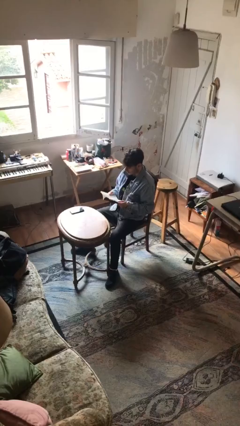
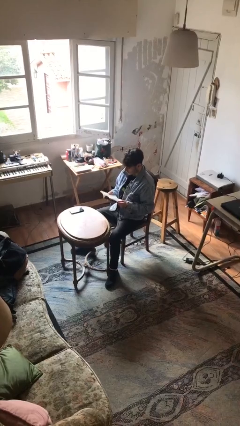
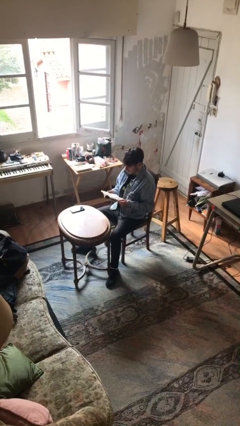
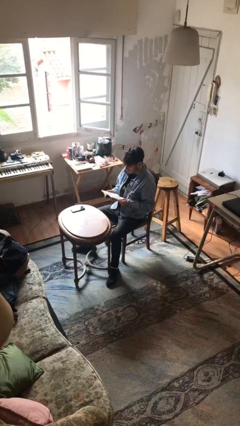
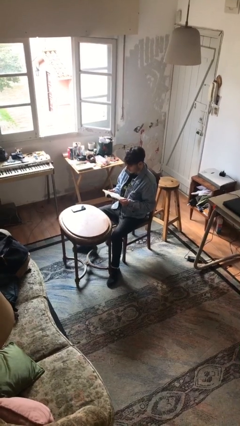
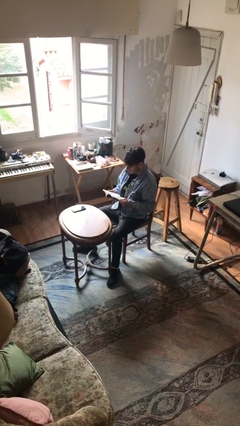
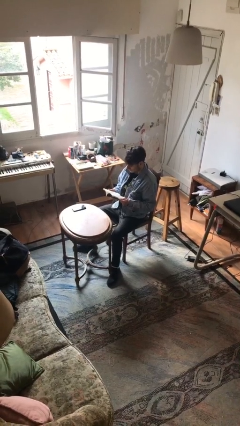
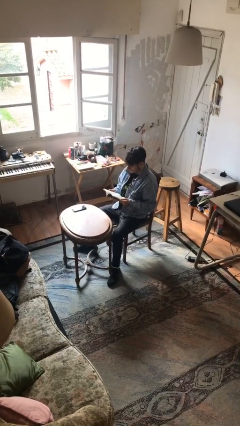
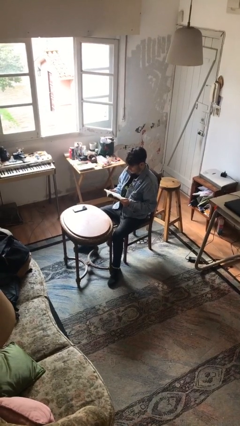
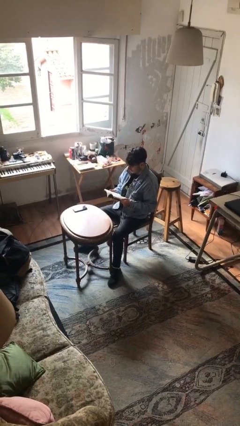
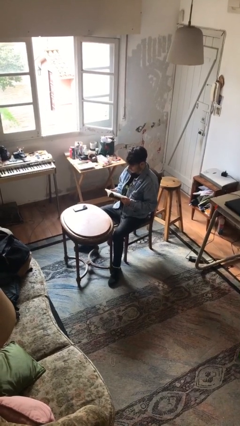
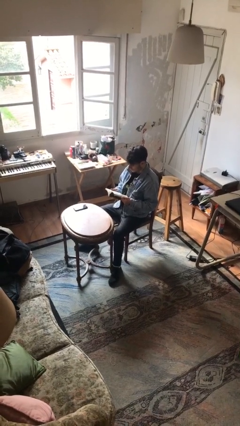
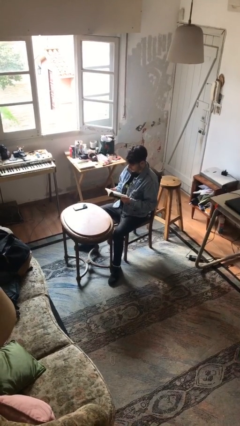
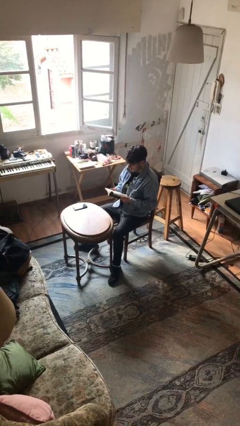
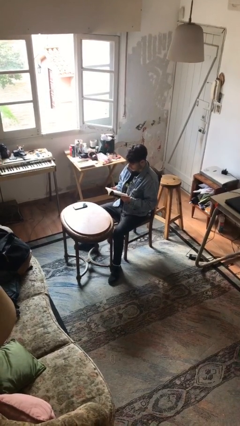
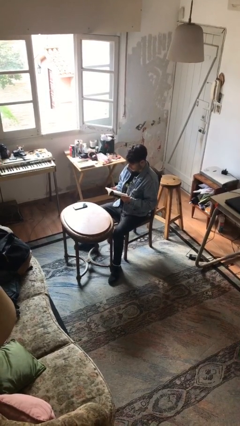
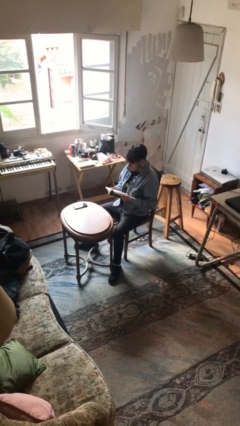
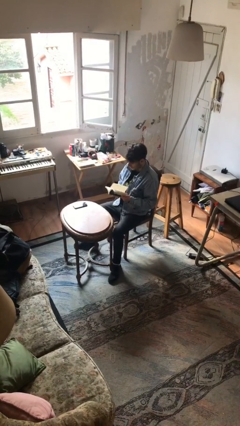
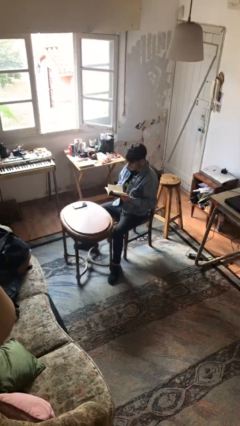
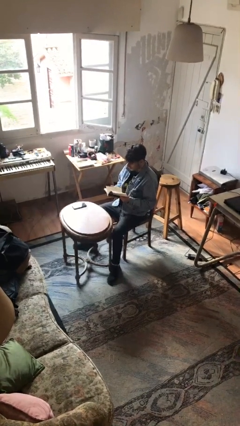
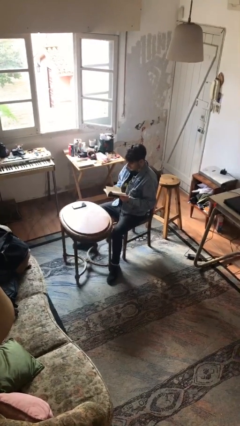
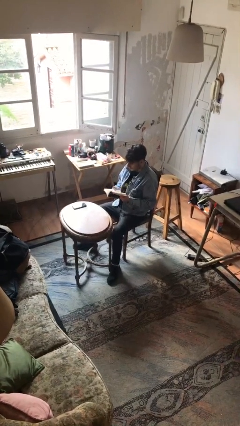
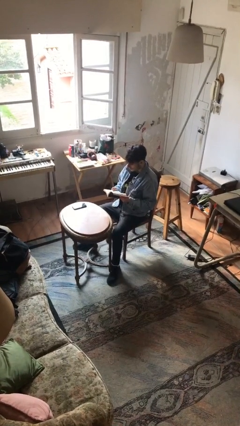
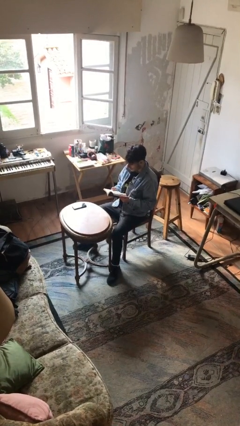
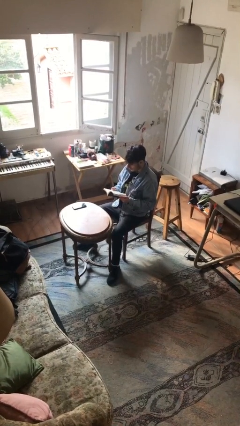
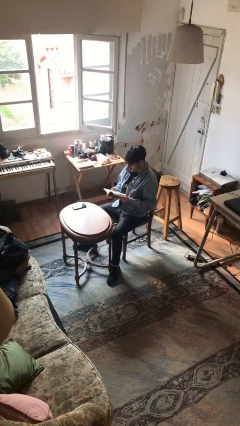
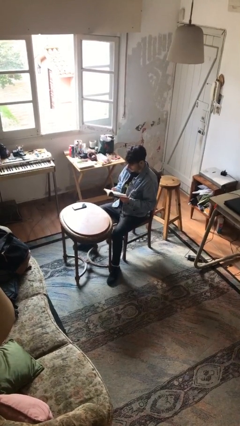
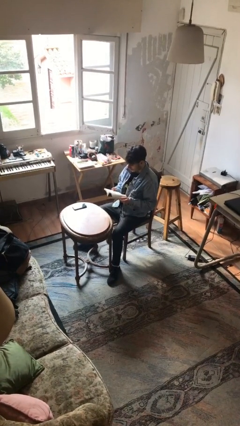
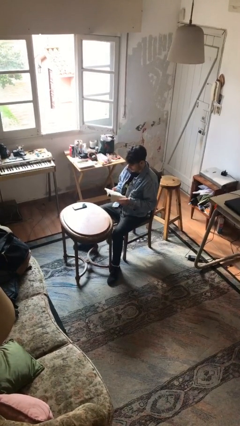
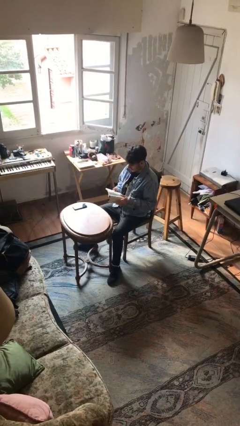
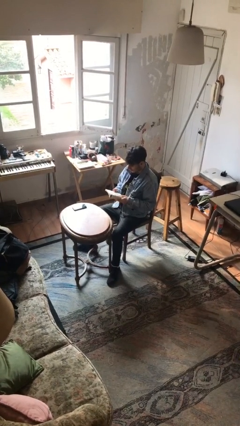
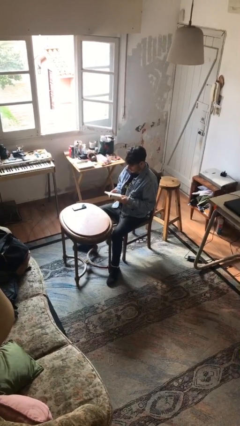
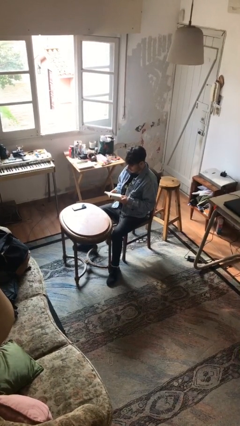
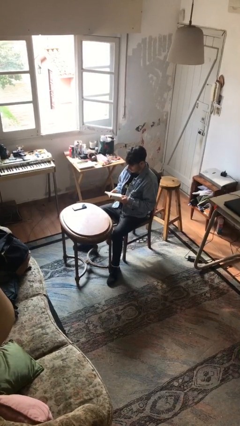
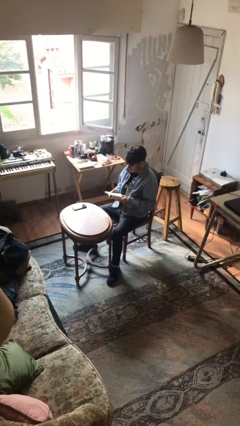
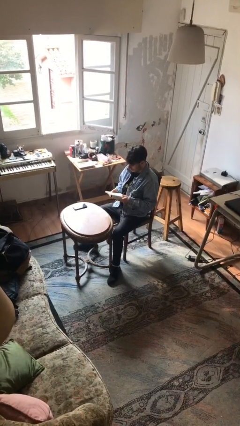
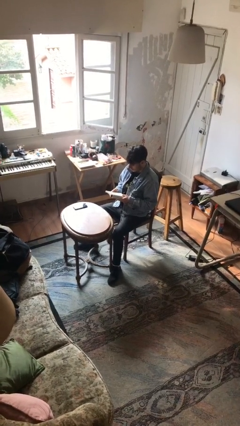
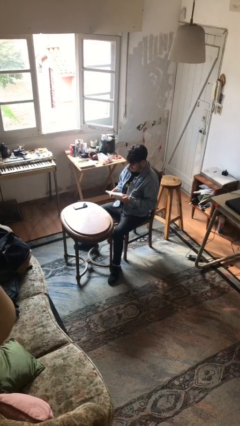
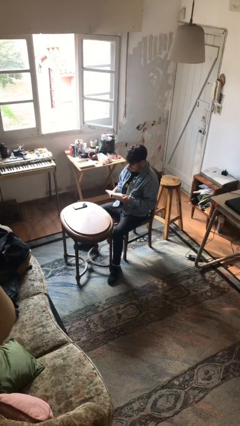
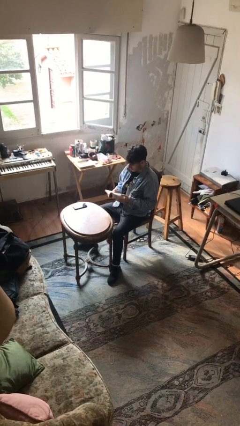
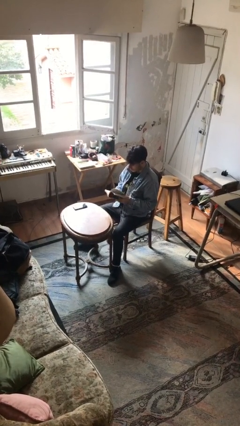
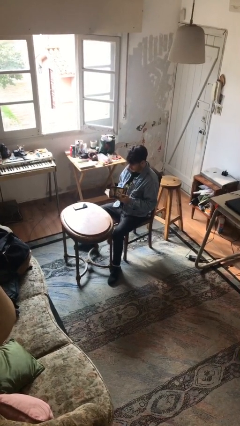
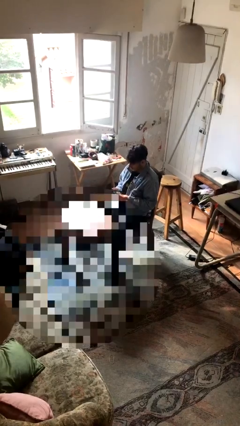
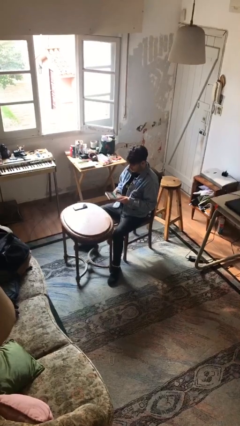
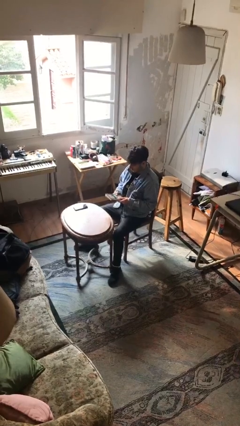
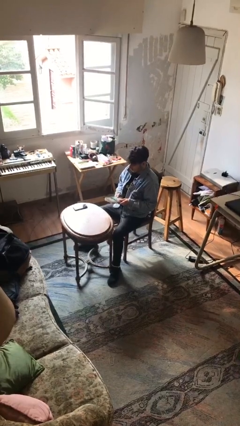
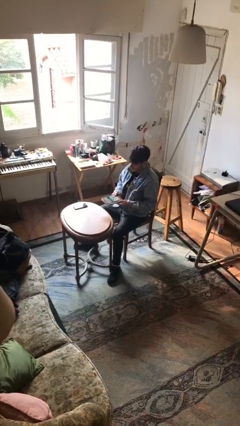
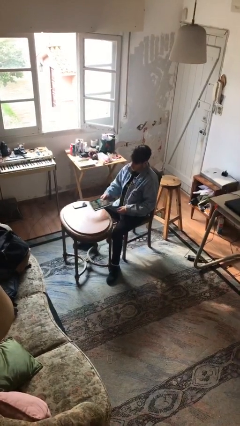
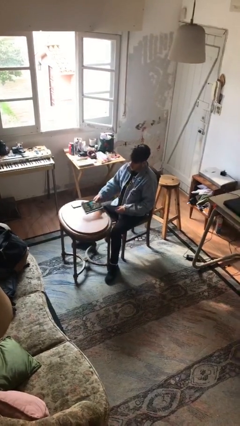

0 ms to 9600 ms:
person reads document

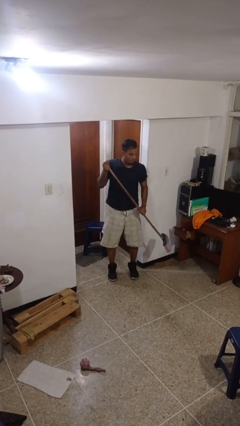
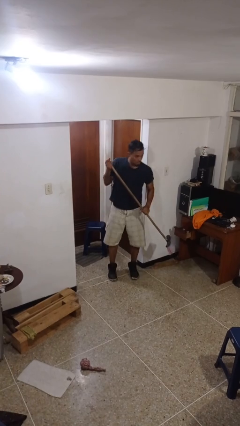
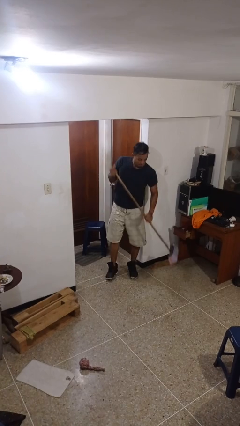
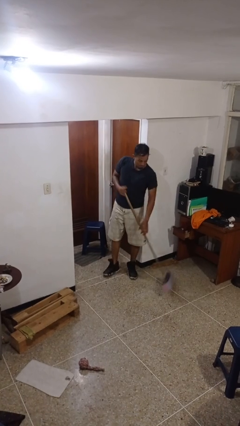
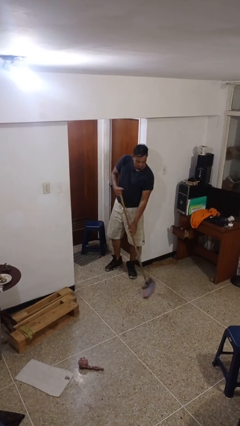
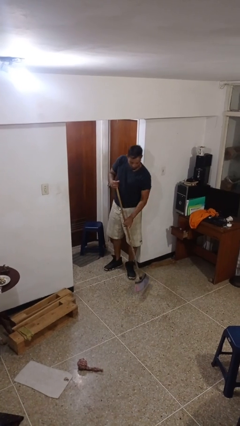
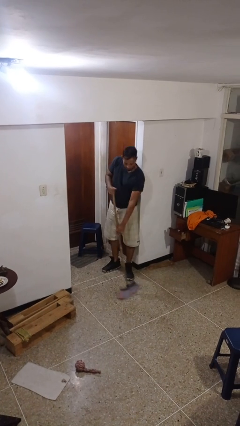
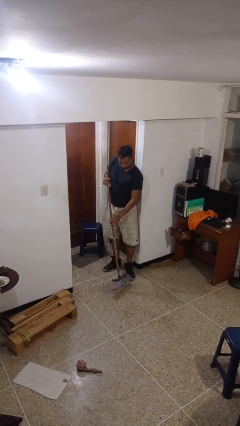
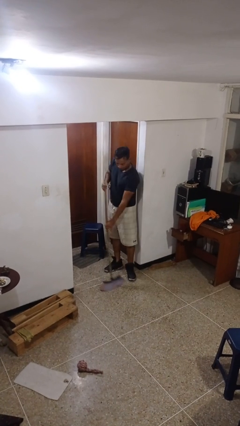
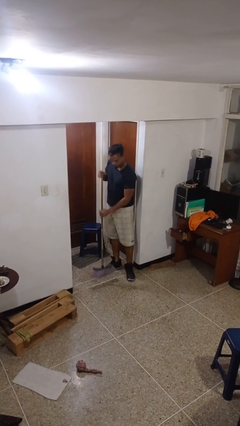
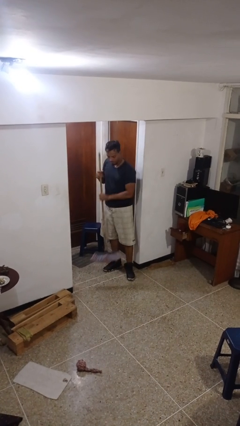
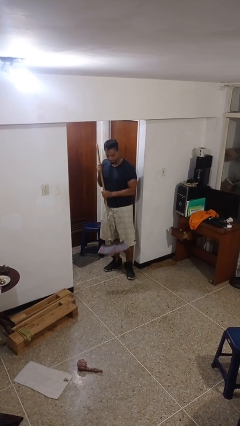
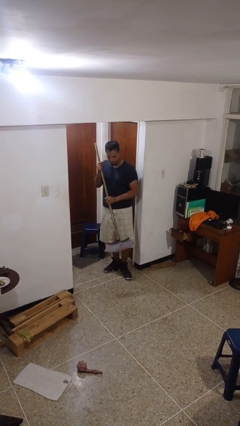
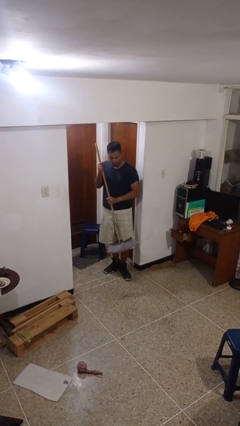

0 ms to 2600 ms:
person sweeps floor

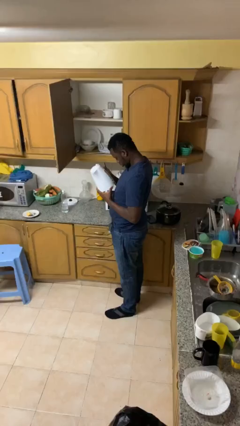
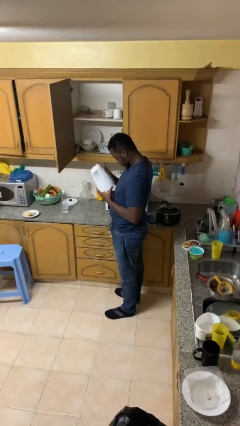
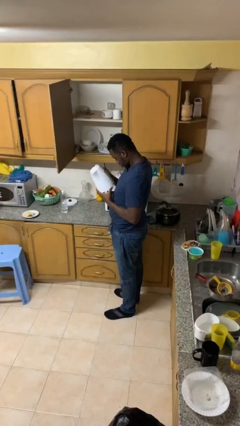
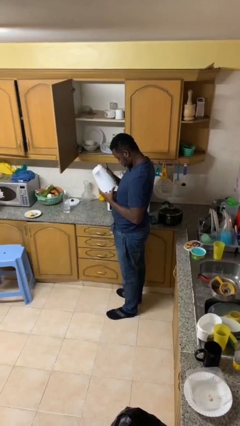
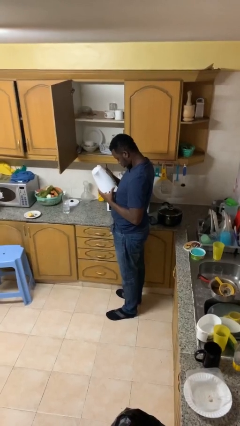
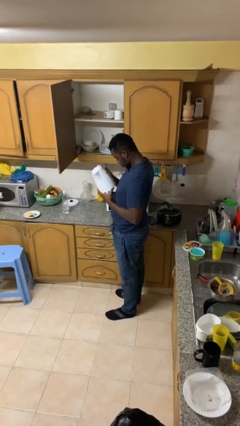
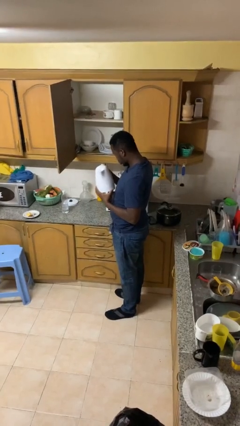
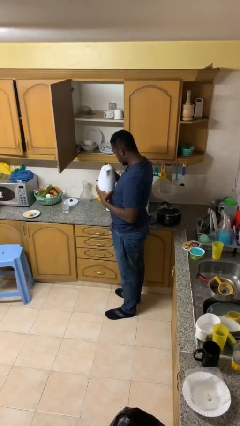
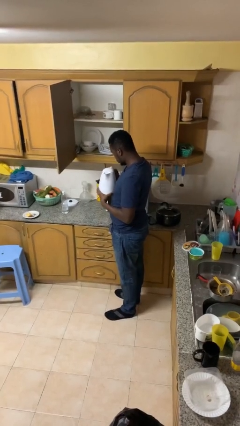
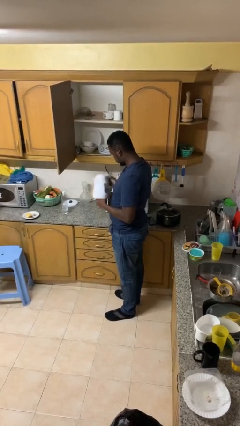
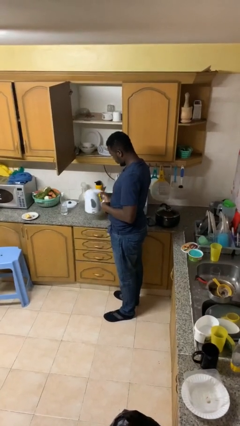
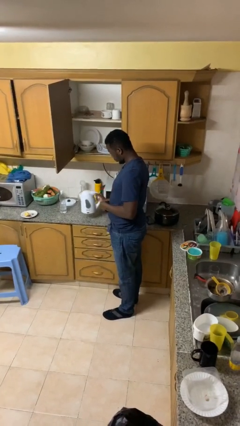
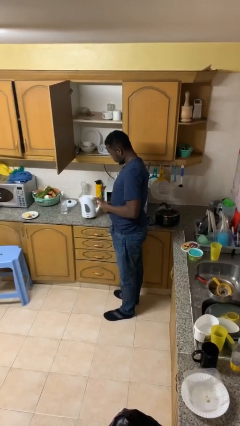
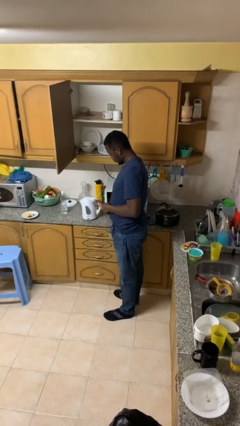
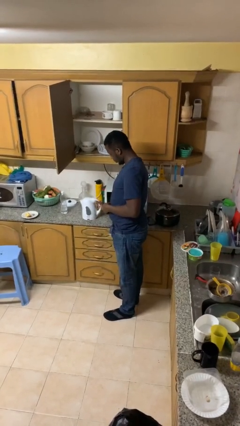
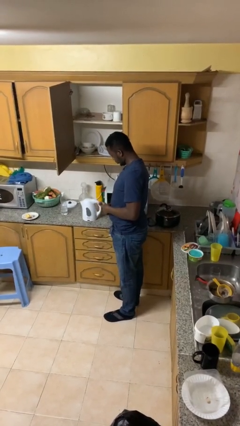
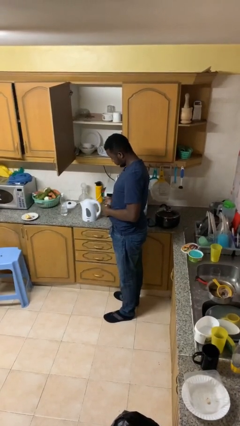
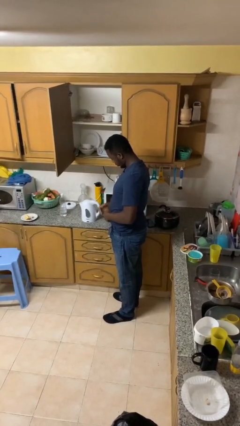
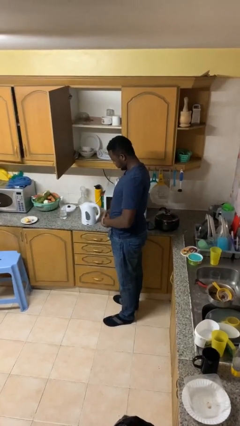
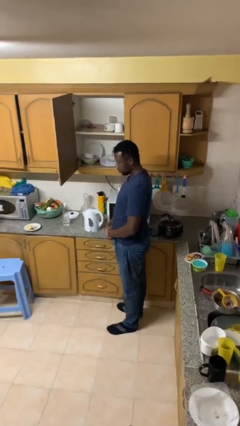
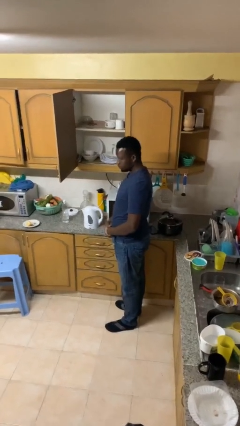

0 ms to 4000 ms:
person puts down object on table

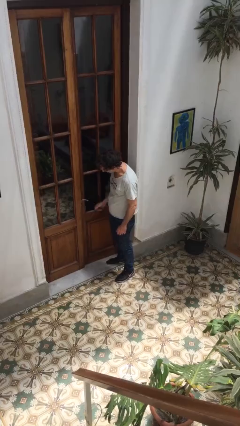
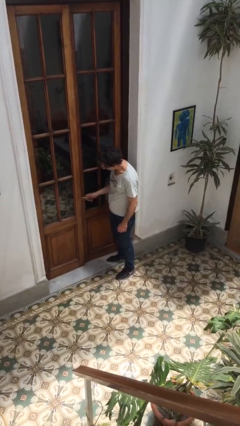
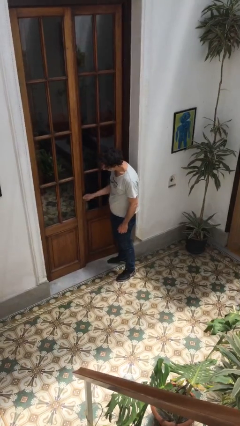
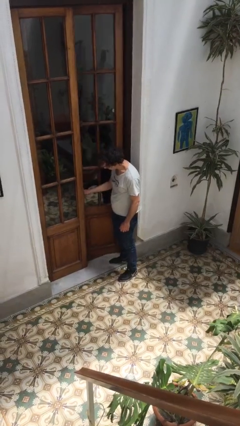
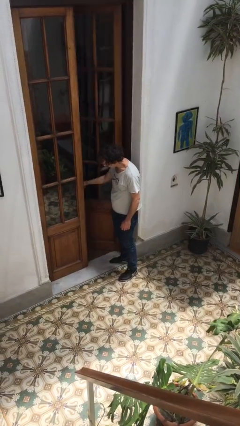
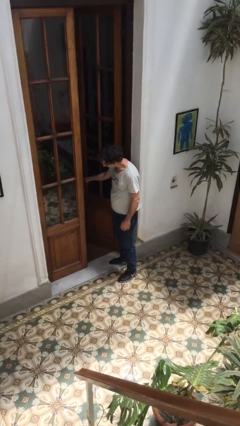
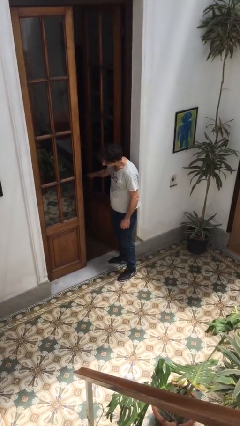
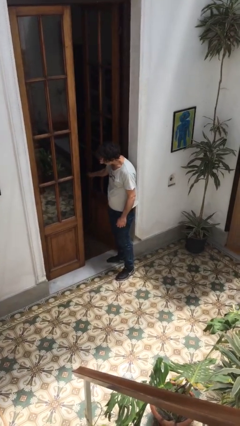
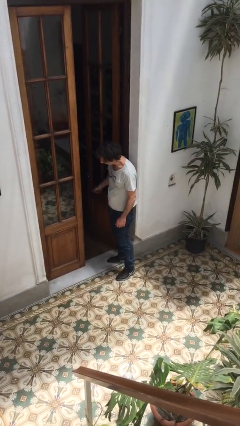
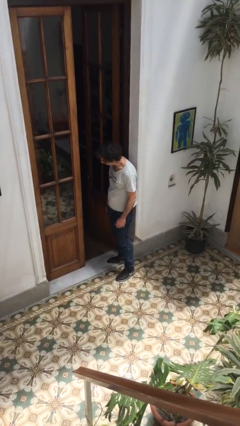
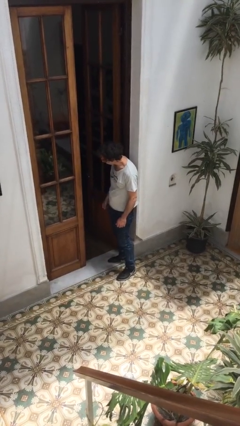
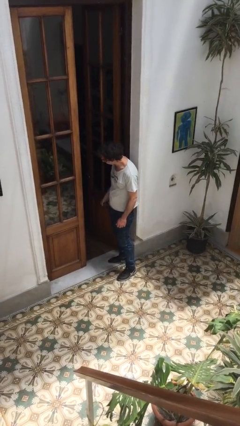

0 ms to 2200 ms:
person opens facility door
